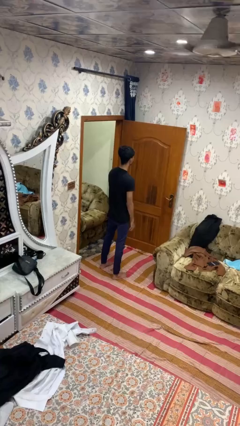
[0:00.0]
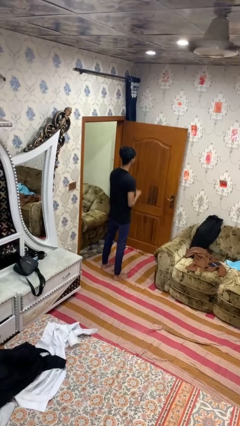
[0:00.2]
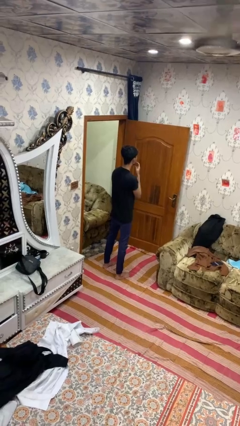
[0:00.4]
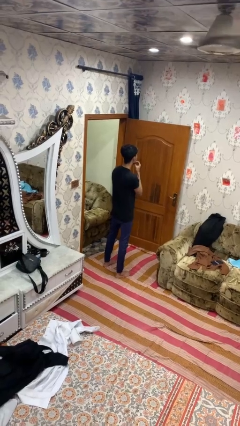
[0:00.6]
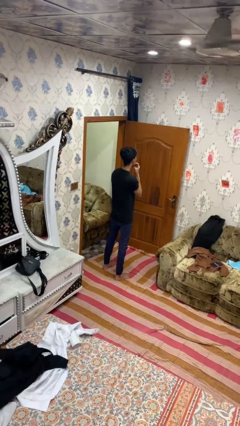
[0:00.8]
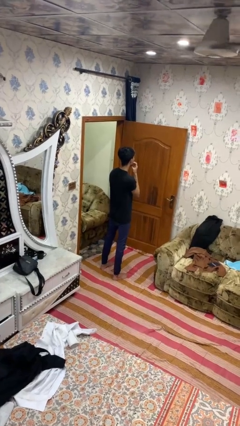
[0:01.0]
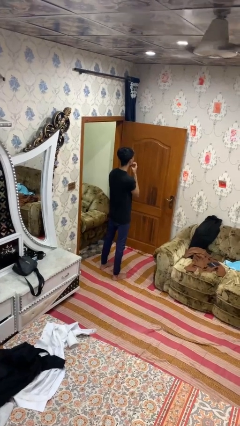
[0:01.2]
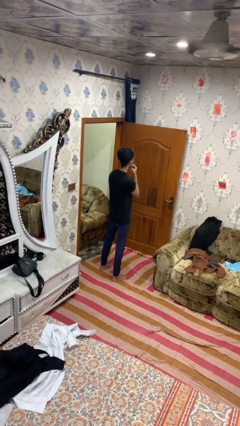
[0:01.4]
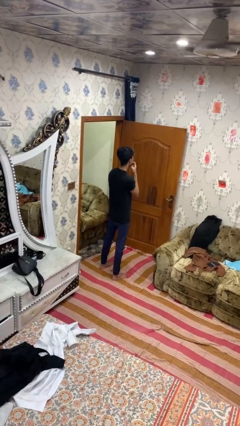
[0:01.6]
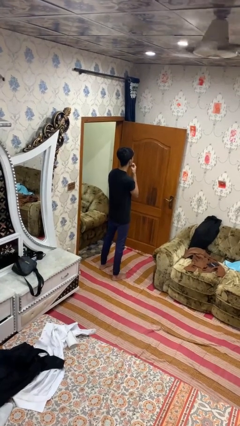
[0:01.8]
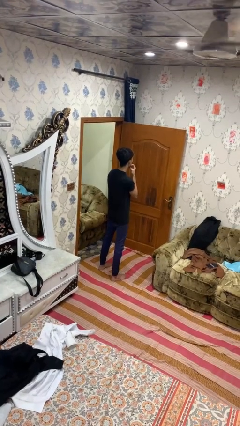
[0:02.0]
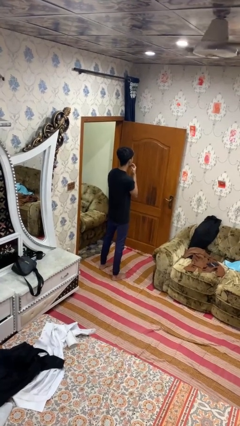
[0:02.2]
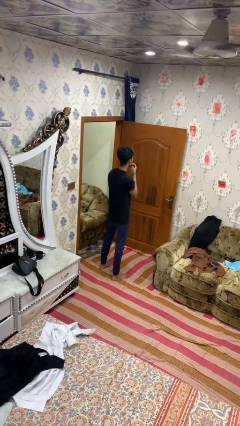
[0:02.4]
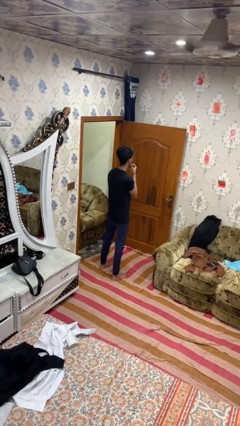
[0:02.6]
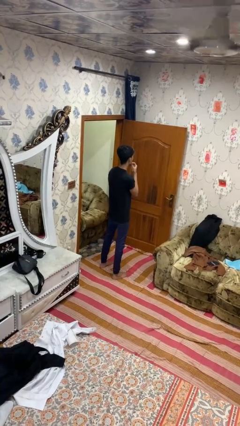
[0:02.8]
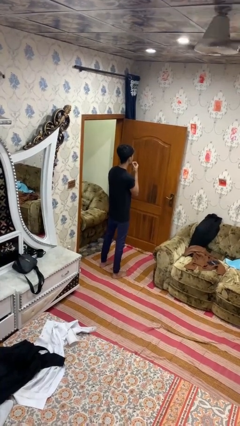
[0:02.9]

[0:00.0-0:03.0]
person strokes chin

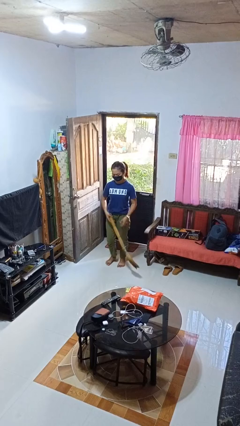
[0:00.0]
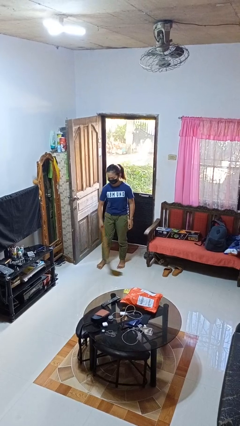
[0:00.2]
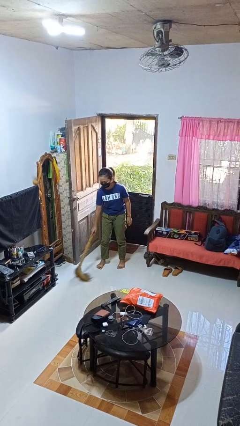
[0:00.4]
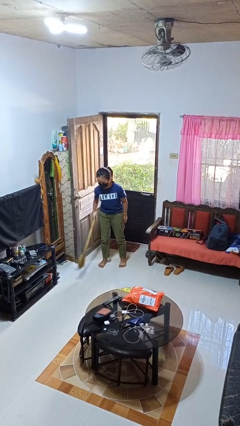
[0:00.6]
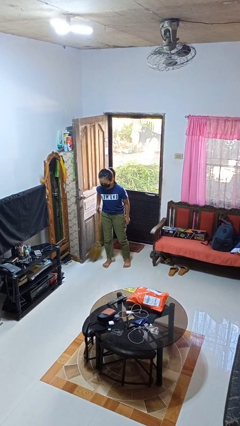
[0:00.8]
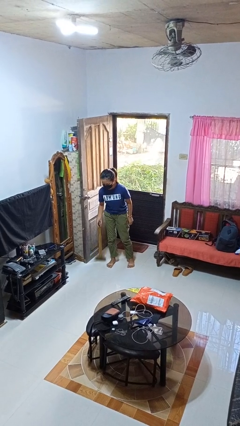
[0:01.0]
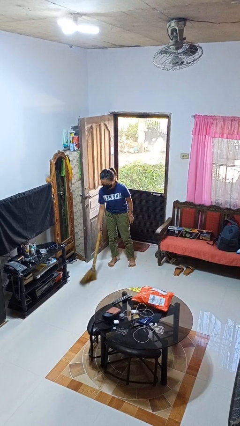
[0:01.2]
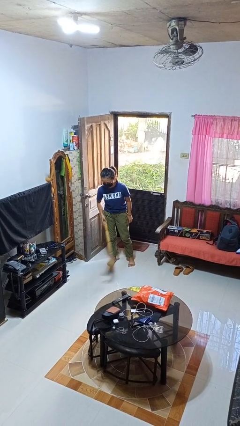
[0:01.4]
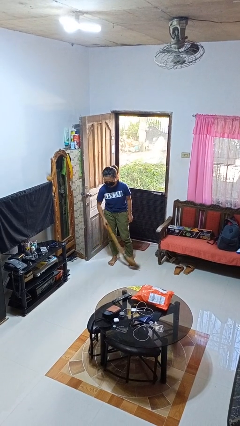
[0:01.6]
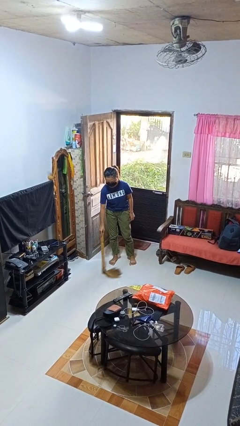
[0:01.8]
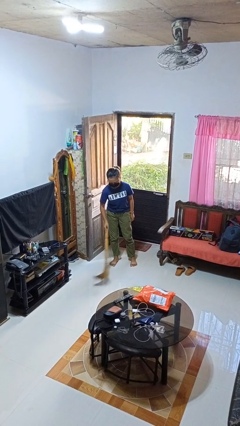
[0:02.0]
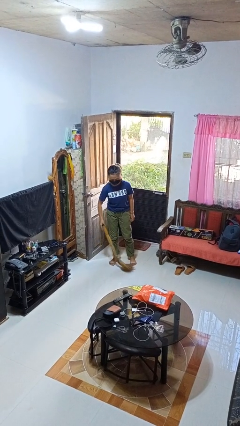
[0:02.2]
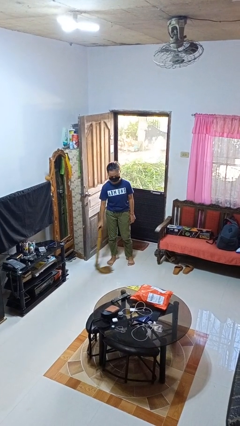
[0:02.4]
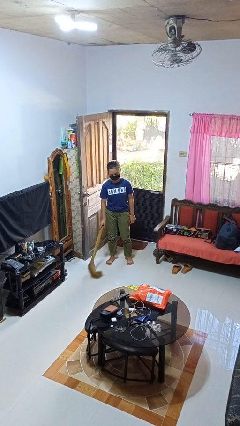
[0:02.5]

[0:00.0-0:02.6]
person sweeps floor

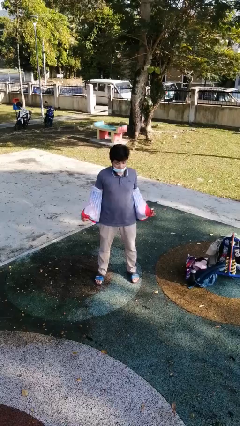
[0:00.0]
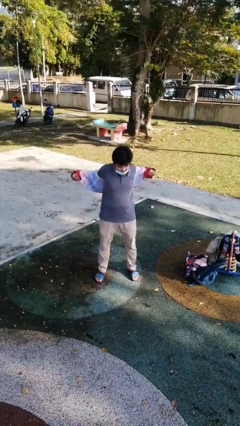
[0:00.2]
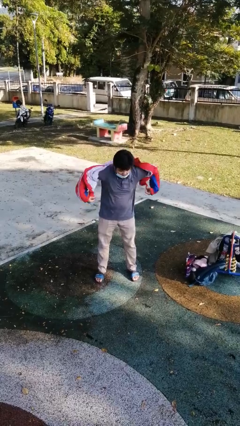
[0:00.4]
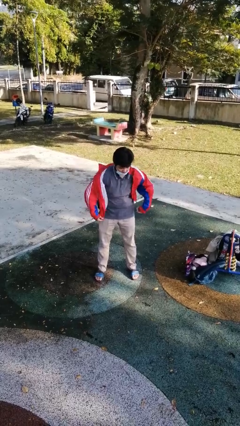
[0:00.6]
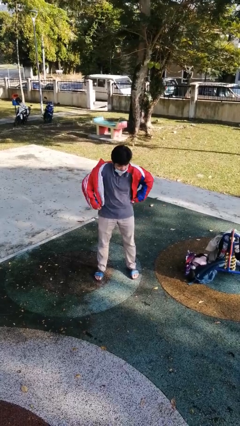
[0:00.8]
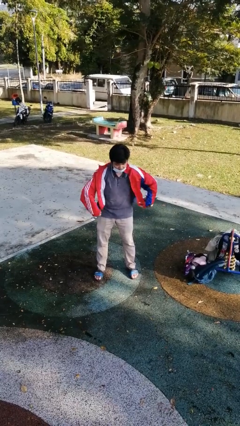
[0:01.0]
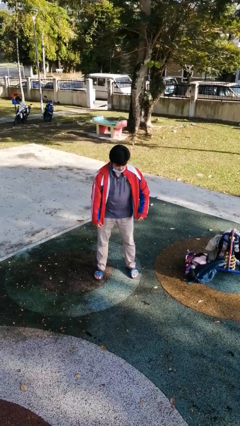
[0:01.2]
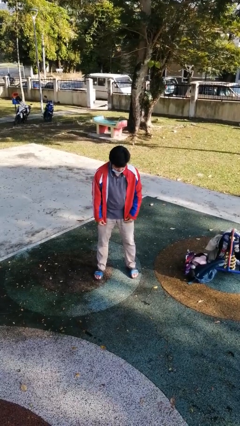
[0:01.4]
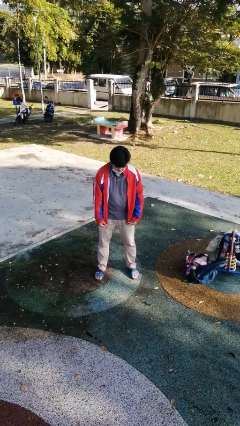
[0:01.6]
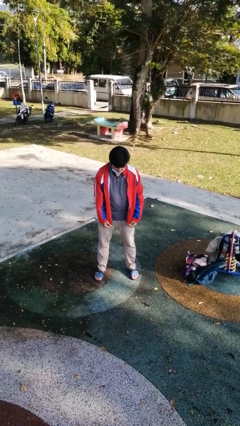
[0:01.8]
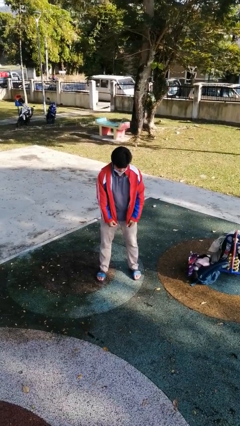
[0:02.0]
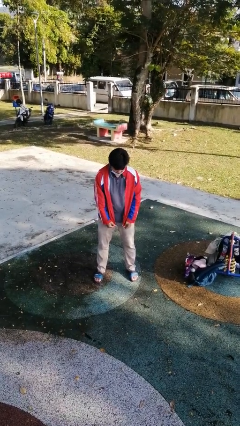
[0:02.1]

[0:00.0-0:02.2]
person puts on jacket

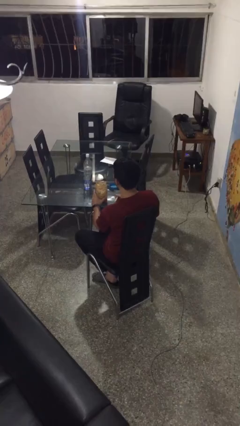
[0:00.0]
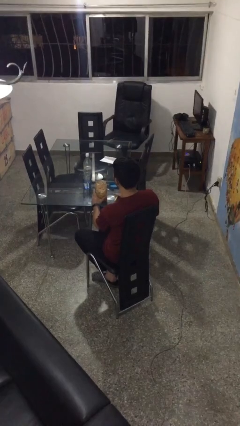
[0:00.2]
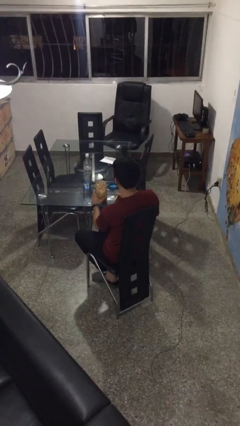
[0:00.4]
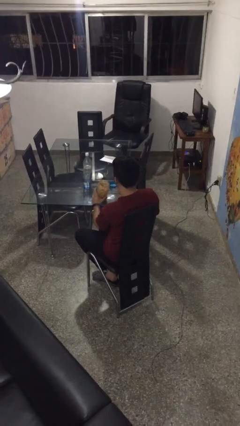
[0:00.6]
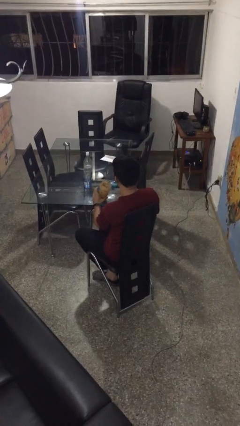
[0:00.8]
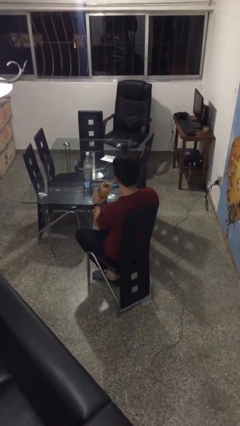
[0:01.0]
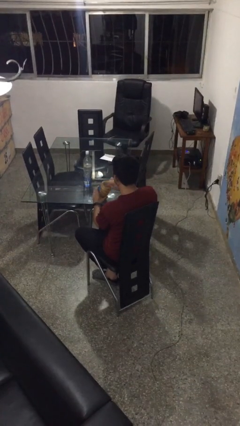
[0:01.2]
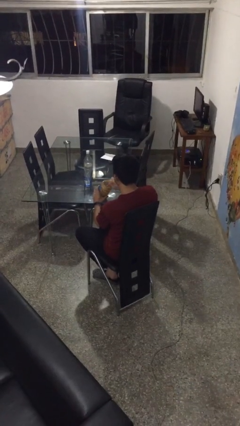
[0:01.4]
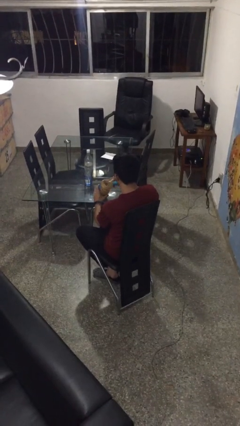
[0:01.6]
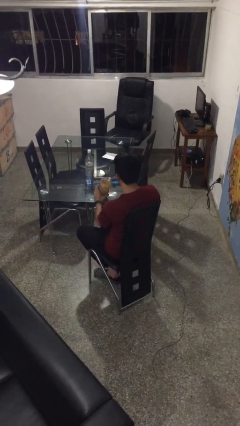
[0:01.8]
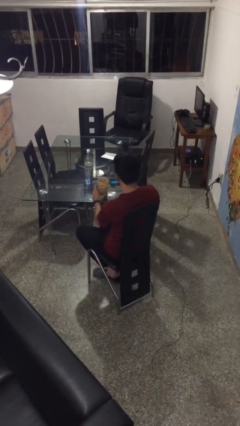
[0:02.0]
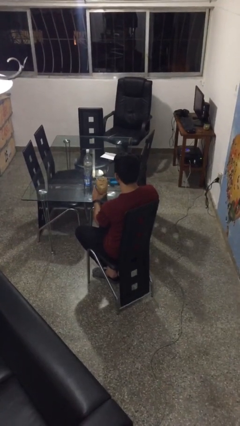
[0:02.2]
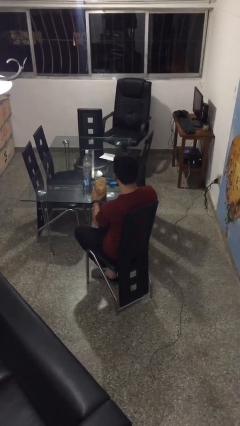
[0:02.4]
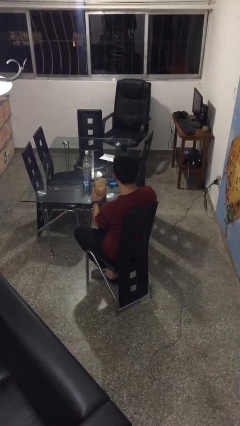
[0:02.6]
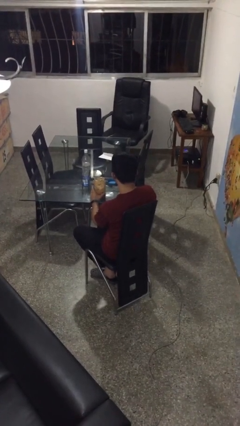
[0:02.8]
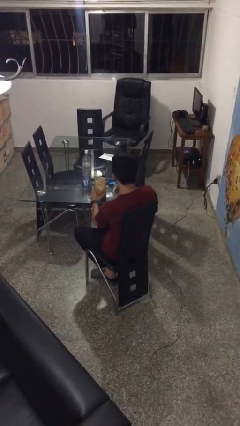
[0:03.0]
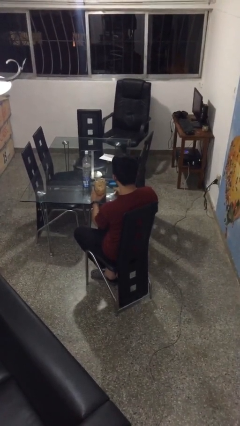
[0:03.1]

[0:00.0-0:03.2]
person eats with utensil

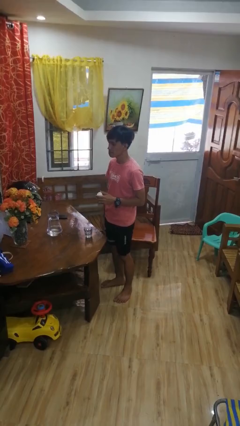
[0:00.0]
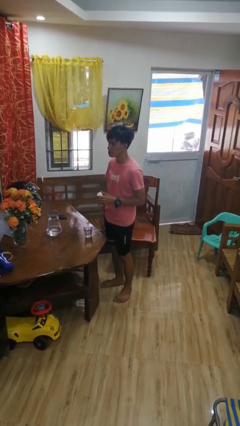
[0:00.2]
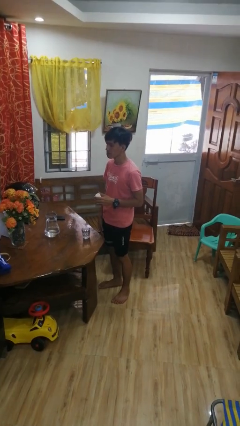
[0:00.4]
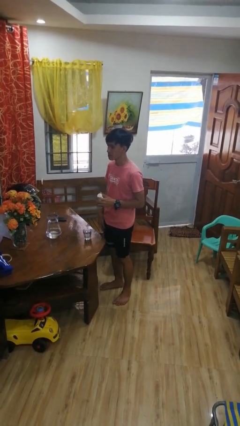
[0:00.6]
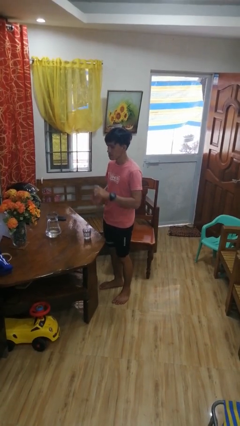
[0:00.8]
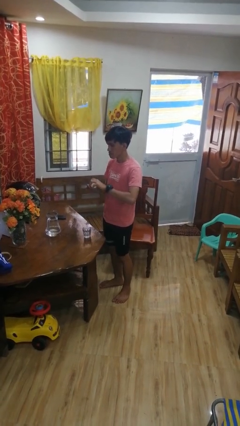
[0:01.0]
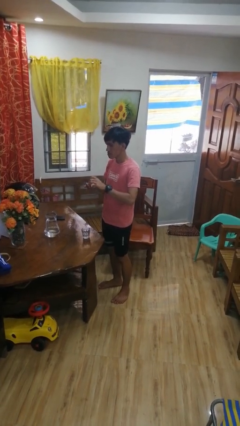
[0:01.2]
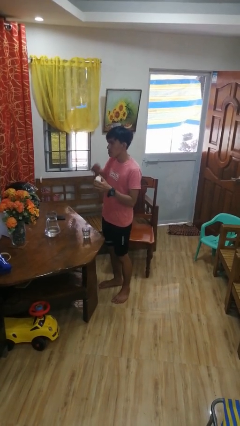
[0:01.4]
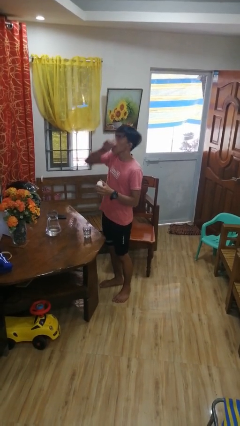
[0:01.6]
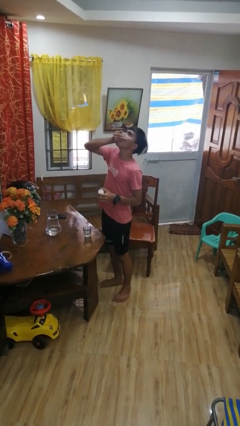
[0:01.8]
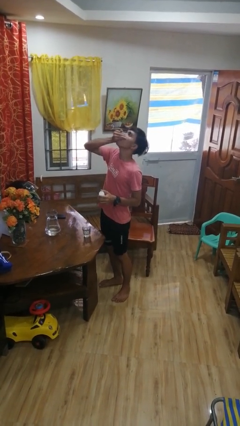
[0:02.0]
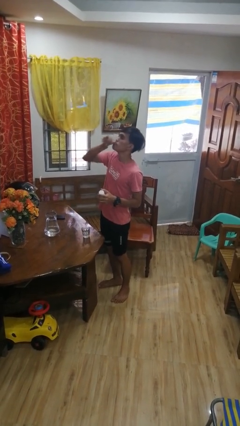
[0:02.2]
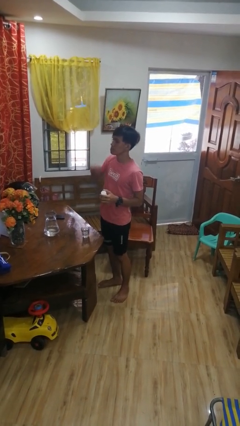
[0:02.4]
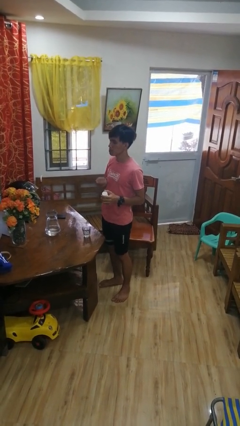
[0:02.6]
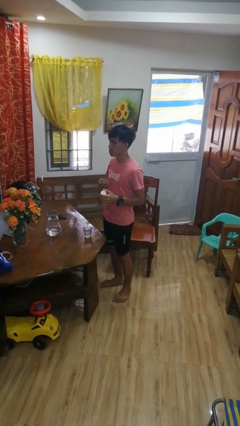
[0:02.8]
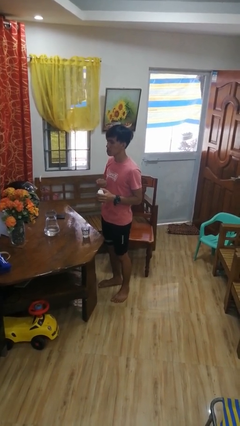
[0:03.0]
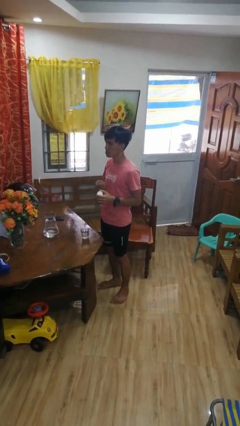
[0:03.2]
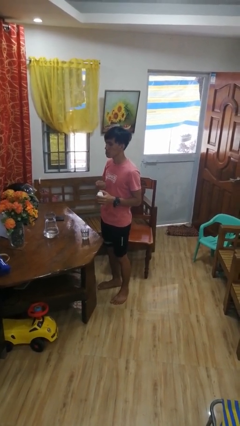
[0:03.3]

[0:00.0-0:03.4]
person takes medicine pills

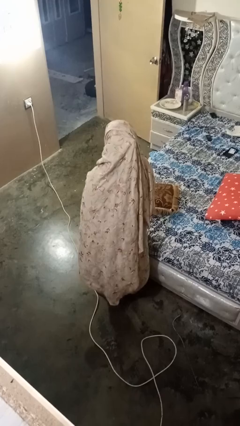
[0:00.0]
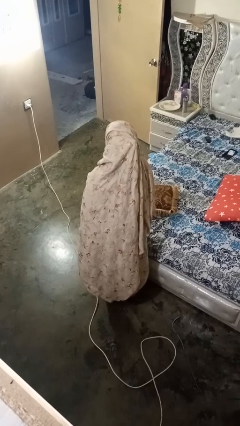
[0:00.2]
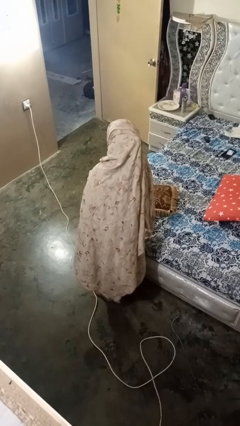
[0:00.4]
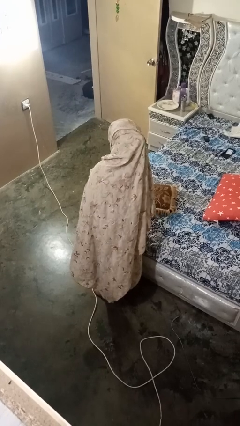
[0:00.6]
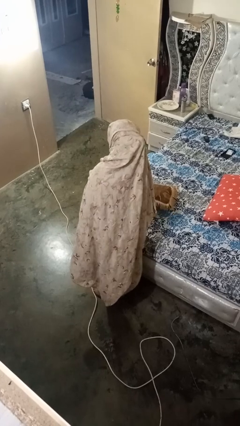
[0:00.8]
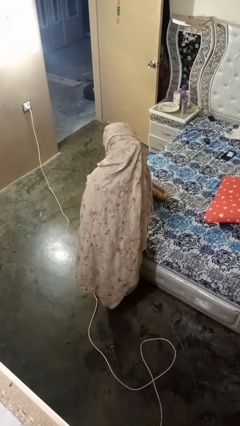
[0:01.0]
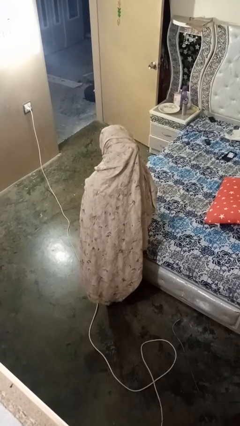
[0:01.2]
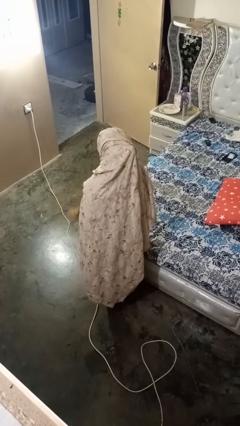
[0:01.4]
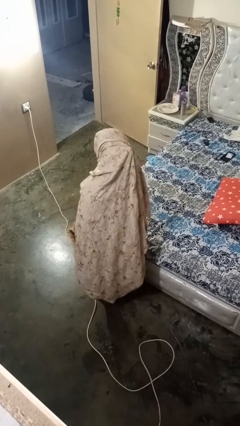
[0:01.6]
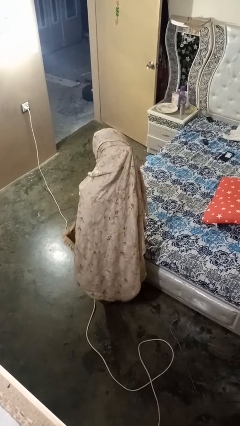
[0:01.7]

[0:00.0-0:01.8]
person picks up object from bed

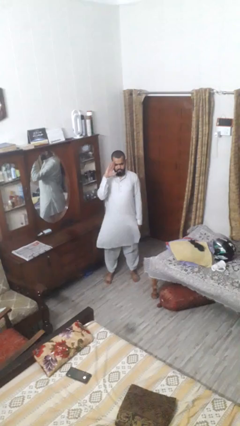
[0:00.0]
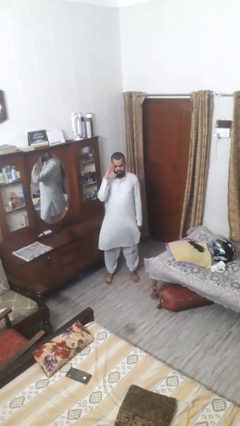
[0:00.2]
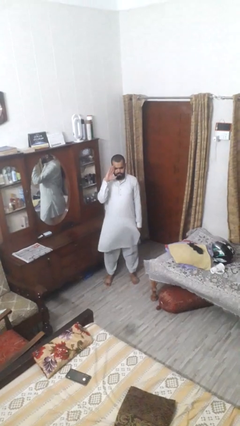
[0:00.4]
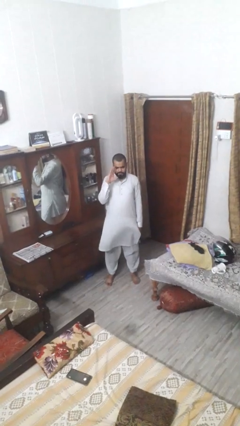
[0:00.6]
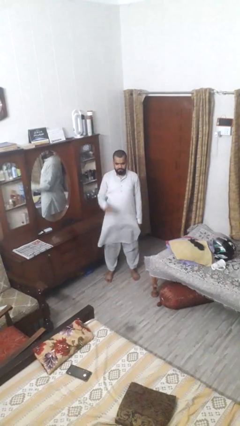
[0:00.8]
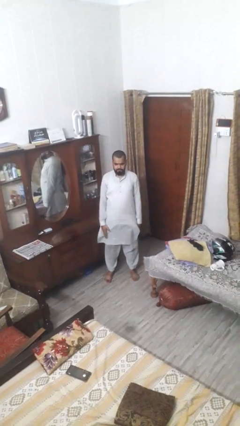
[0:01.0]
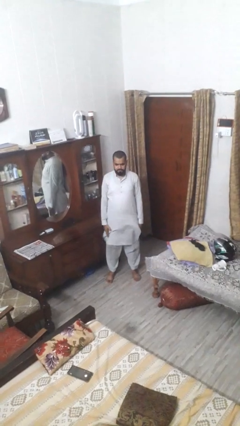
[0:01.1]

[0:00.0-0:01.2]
person salutes
